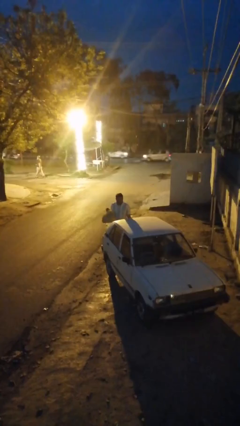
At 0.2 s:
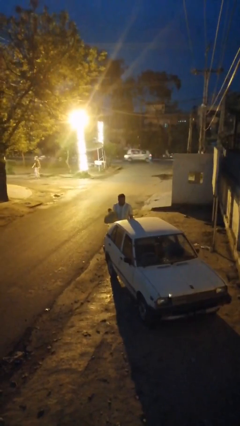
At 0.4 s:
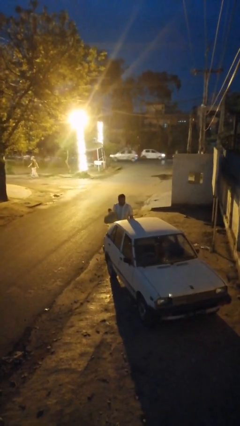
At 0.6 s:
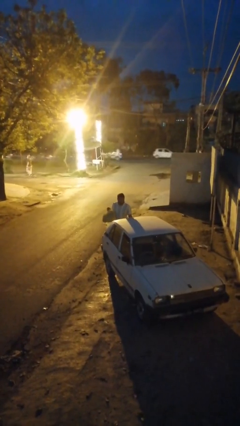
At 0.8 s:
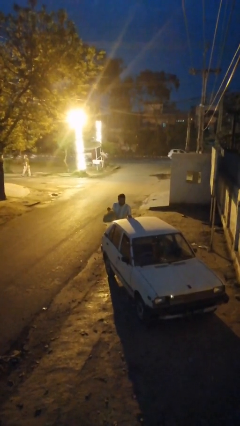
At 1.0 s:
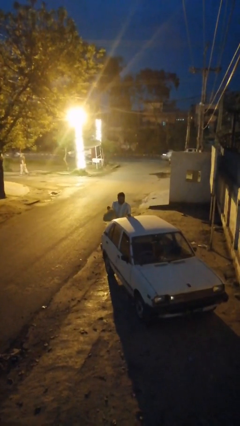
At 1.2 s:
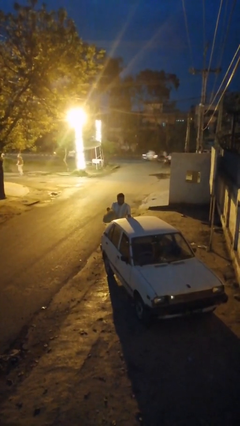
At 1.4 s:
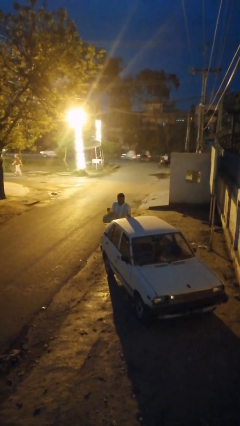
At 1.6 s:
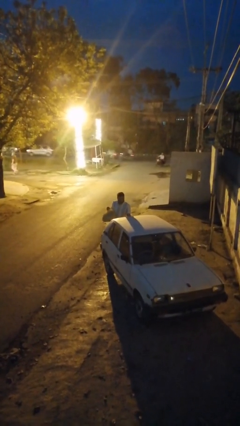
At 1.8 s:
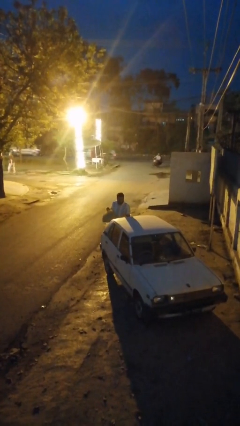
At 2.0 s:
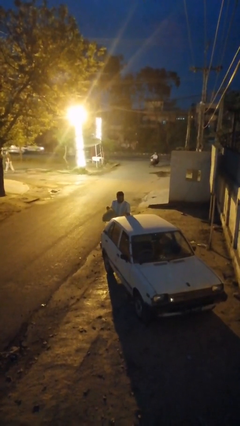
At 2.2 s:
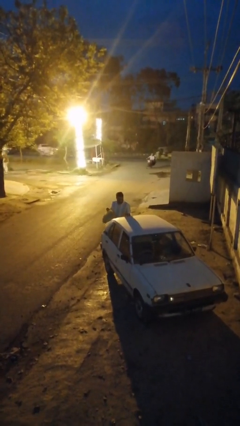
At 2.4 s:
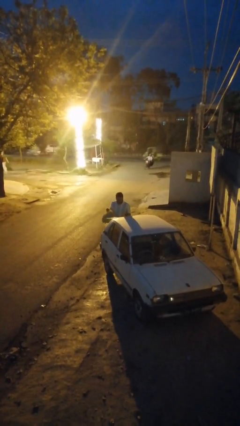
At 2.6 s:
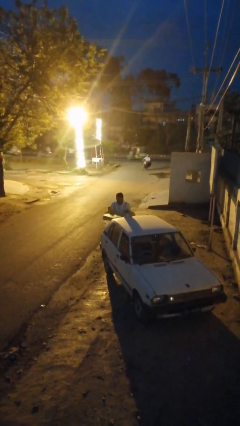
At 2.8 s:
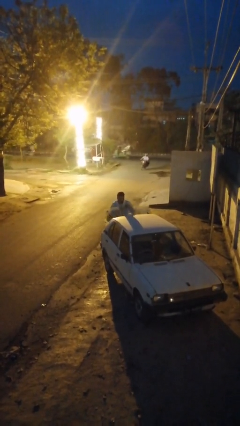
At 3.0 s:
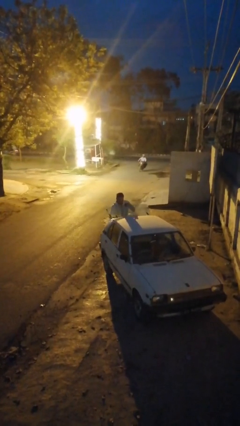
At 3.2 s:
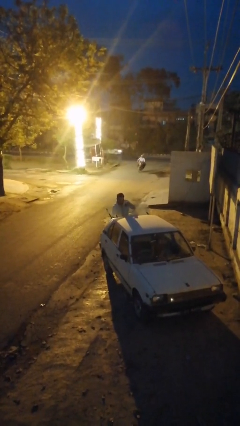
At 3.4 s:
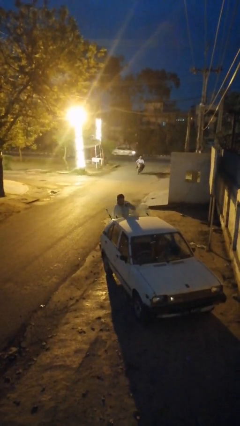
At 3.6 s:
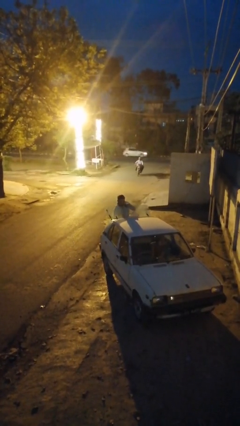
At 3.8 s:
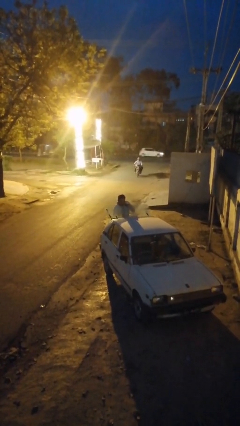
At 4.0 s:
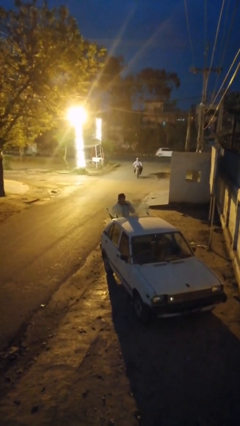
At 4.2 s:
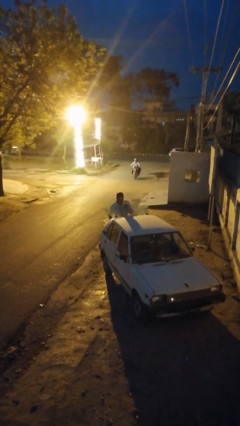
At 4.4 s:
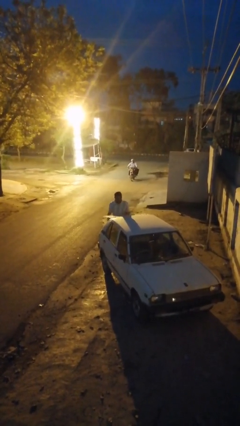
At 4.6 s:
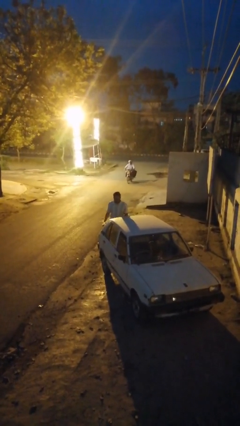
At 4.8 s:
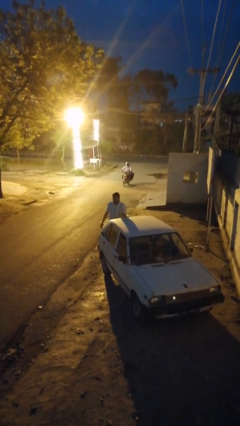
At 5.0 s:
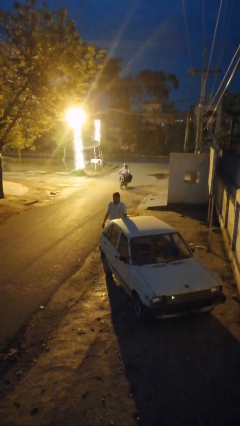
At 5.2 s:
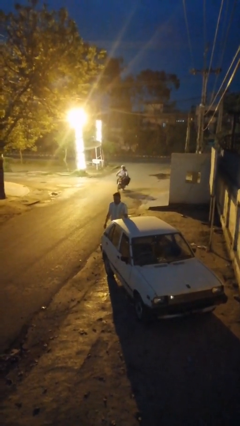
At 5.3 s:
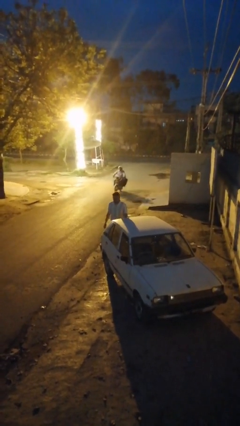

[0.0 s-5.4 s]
person loads car

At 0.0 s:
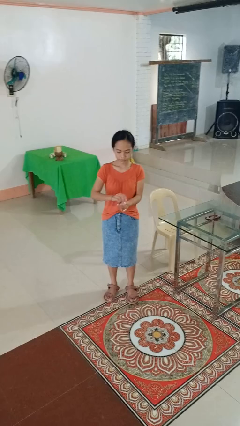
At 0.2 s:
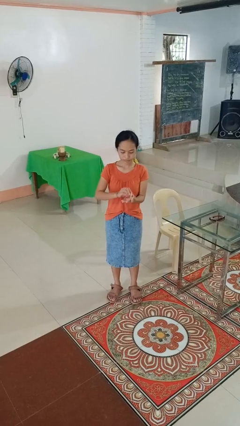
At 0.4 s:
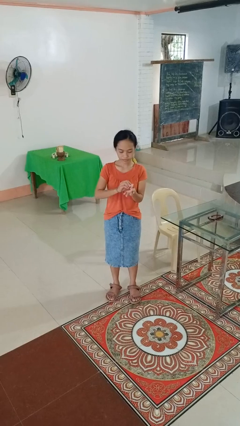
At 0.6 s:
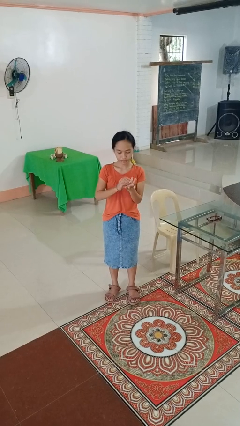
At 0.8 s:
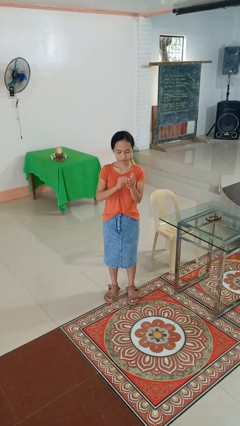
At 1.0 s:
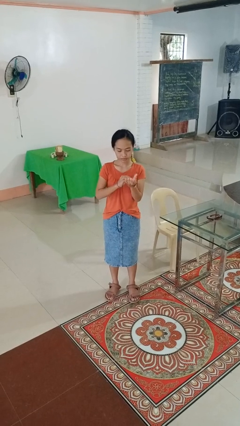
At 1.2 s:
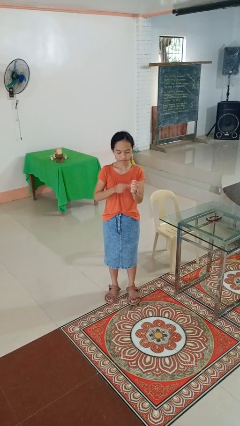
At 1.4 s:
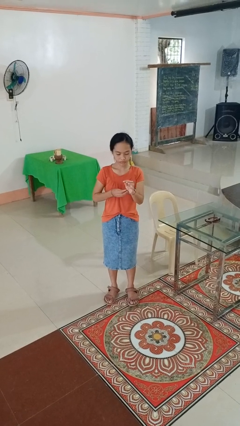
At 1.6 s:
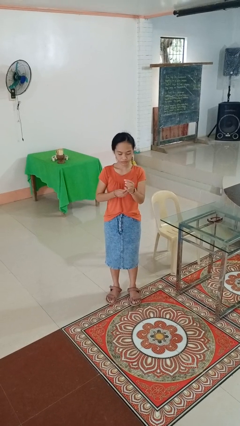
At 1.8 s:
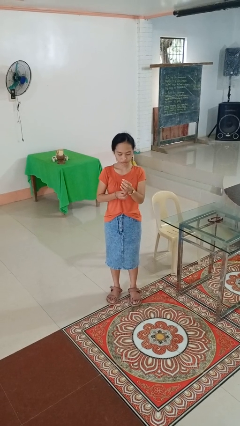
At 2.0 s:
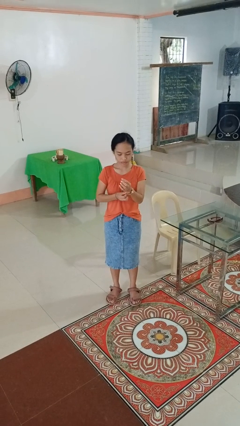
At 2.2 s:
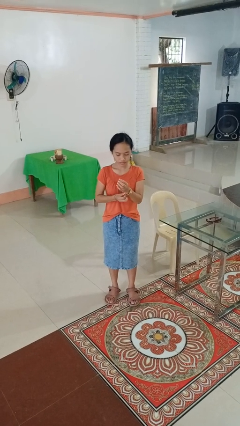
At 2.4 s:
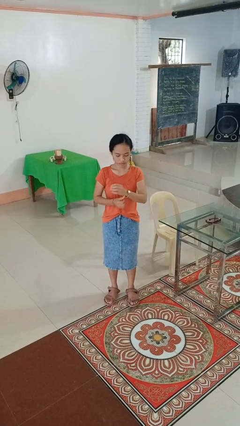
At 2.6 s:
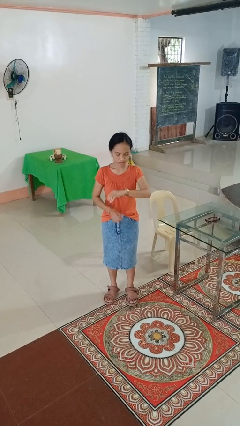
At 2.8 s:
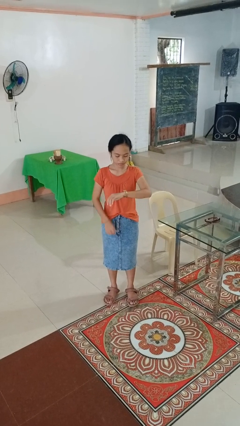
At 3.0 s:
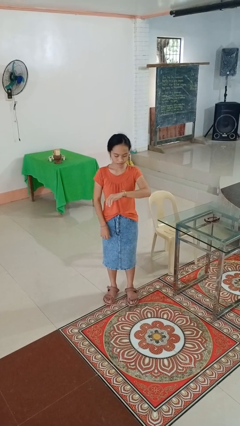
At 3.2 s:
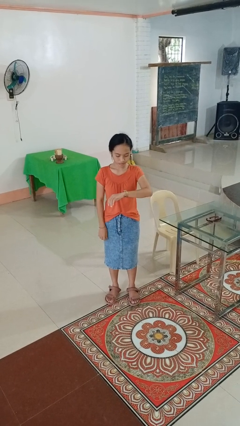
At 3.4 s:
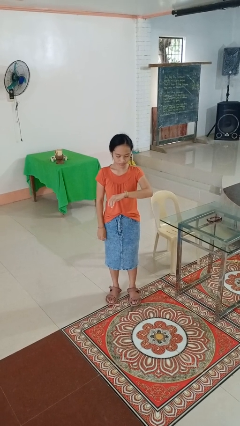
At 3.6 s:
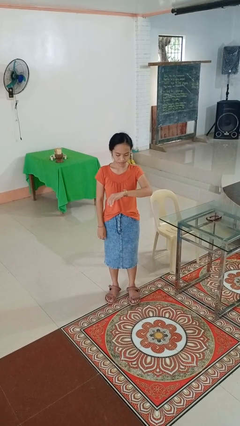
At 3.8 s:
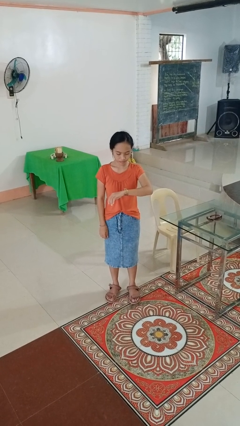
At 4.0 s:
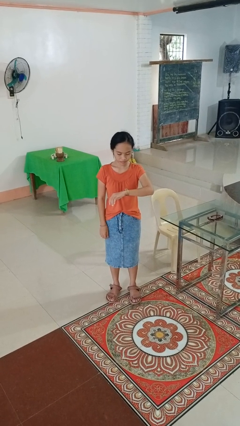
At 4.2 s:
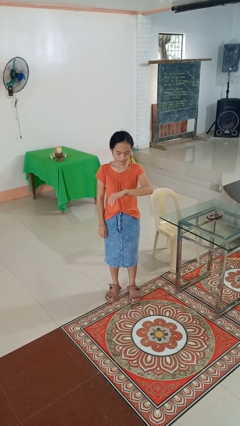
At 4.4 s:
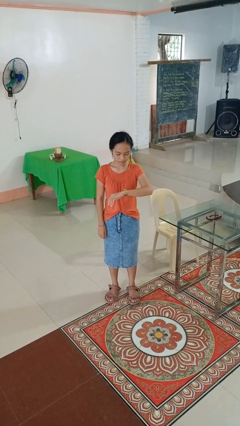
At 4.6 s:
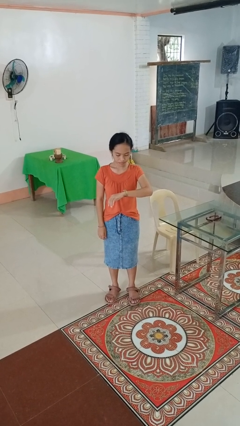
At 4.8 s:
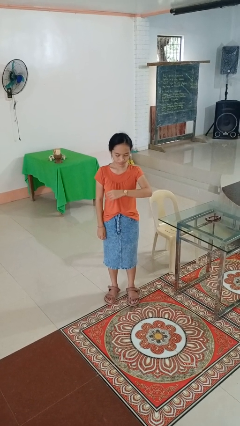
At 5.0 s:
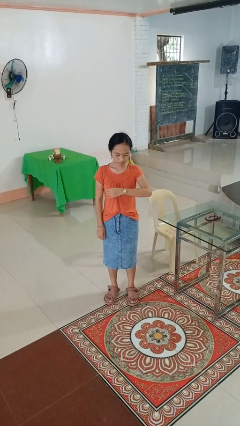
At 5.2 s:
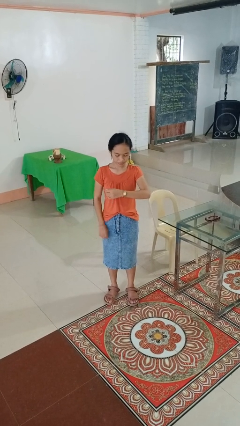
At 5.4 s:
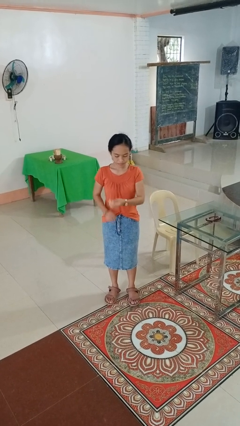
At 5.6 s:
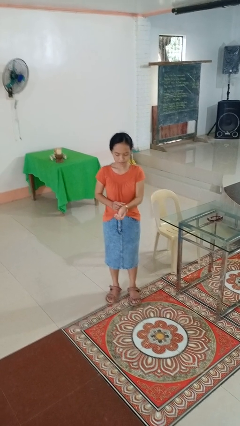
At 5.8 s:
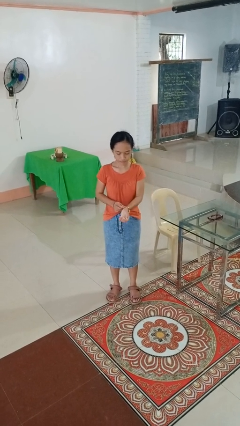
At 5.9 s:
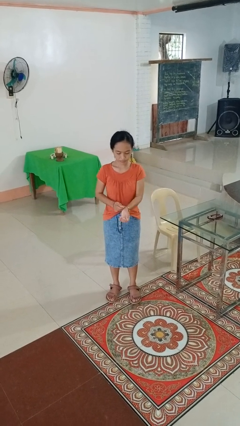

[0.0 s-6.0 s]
person puts on wristwatch

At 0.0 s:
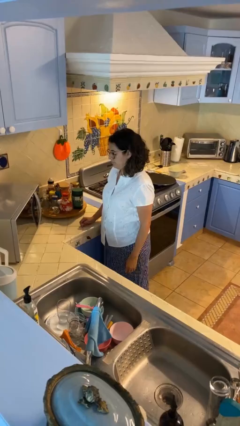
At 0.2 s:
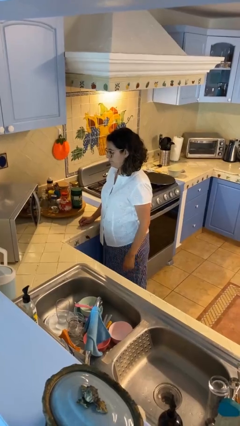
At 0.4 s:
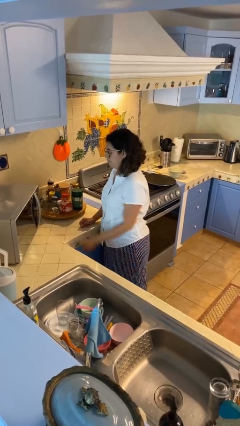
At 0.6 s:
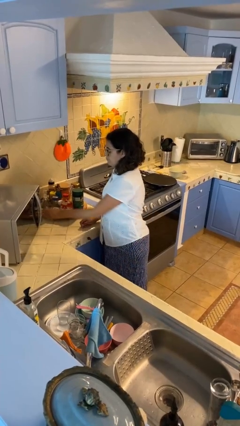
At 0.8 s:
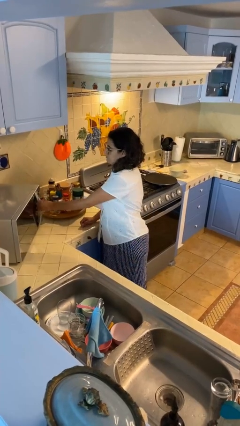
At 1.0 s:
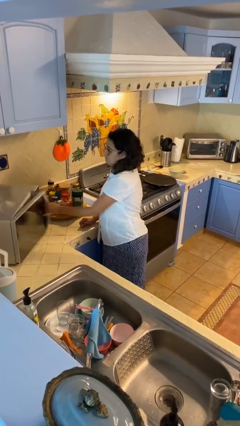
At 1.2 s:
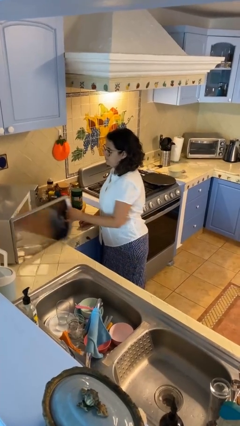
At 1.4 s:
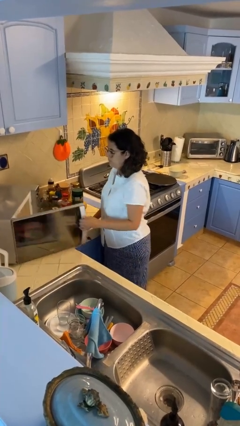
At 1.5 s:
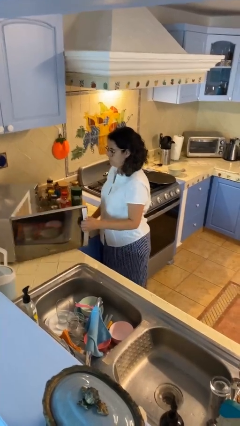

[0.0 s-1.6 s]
person opens microwave

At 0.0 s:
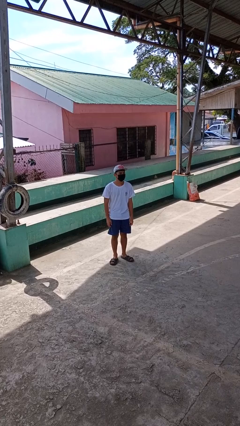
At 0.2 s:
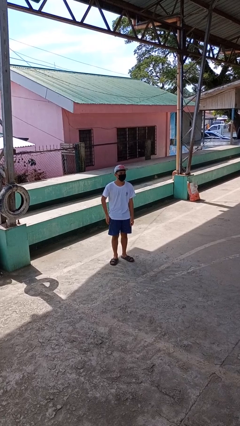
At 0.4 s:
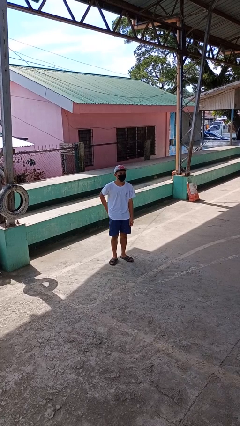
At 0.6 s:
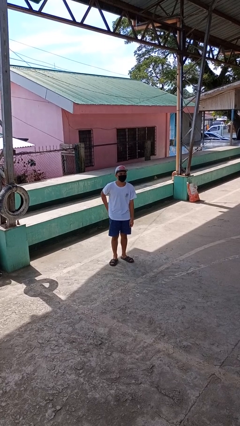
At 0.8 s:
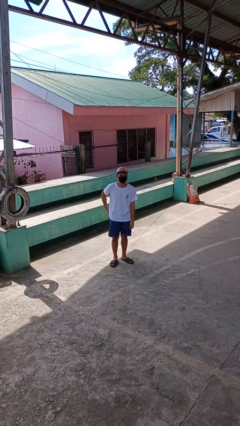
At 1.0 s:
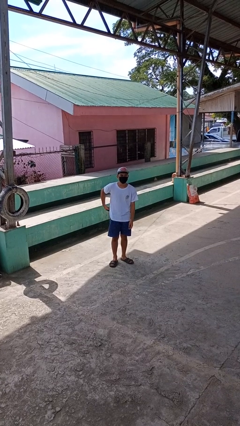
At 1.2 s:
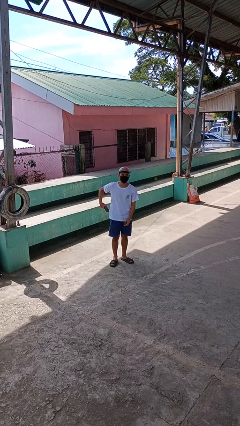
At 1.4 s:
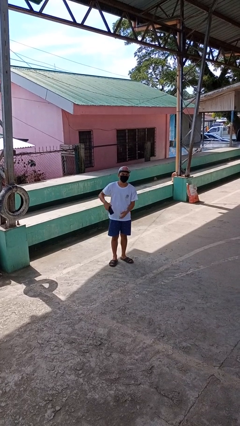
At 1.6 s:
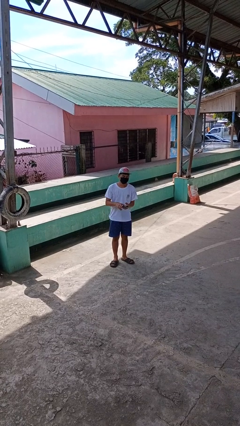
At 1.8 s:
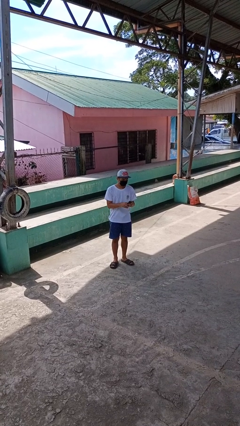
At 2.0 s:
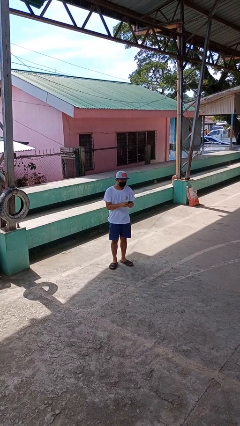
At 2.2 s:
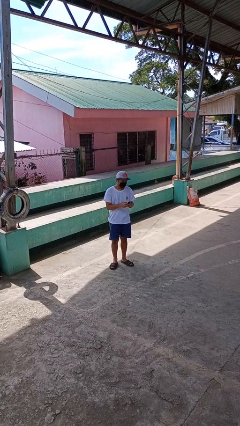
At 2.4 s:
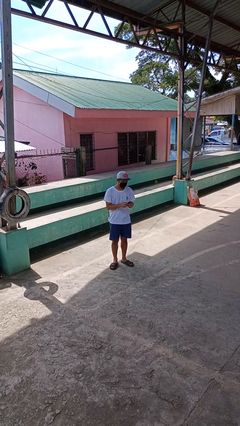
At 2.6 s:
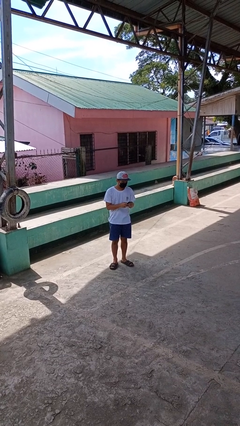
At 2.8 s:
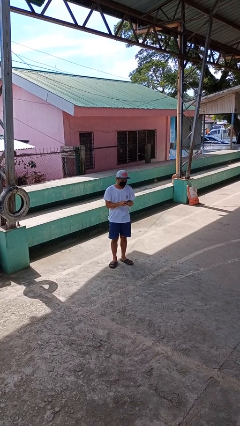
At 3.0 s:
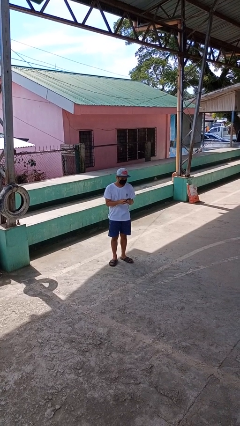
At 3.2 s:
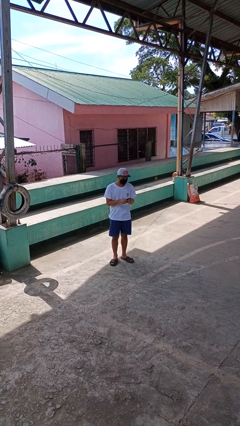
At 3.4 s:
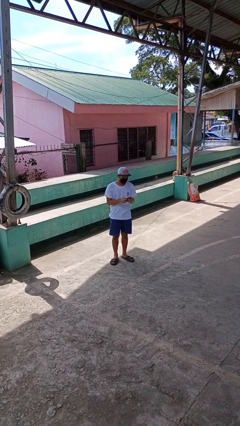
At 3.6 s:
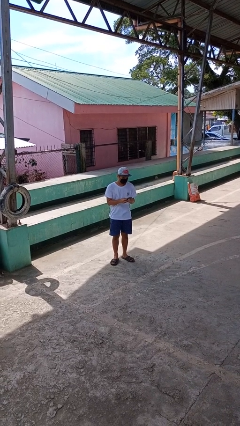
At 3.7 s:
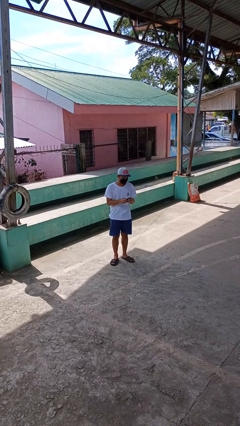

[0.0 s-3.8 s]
person takes phone from pocket

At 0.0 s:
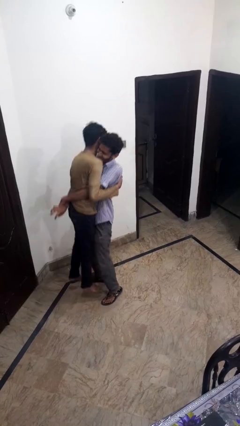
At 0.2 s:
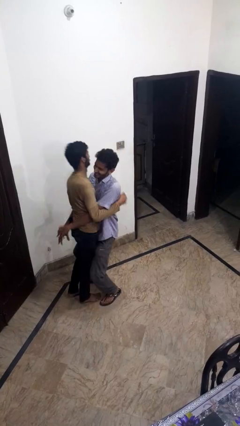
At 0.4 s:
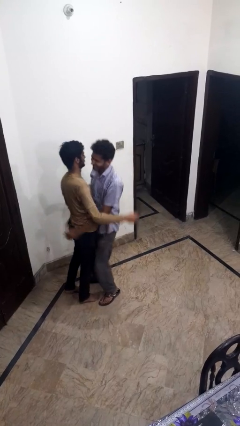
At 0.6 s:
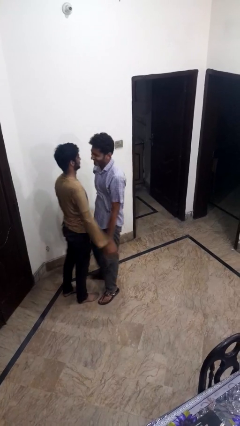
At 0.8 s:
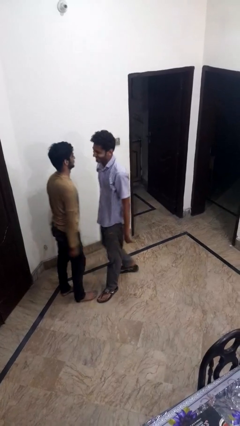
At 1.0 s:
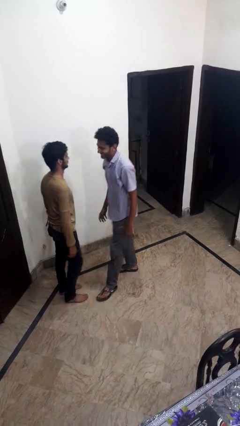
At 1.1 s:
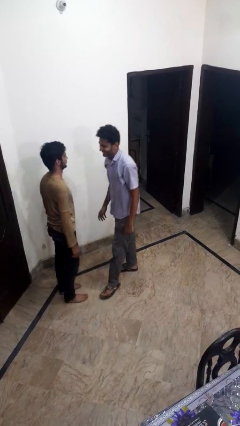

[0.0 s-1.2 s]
person puts down person
